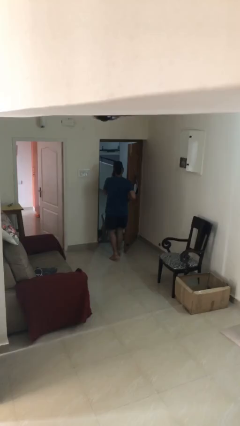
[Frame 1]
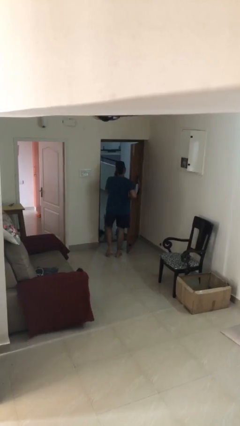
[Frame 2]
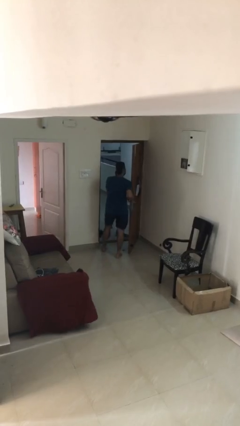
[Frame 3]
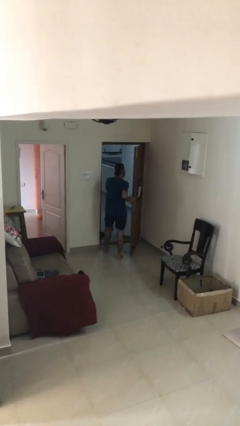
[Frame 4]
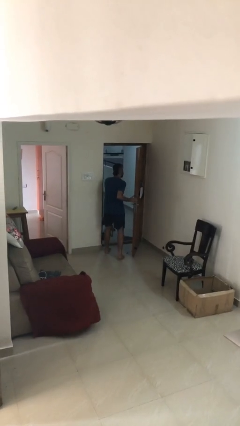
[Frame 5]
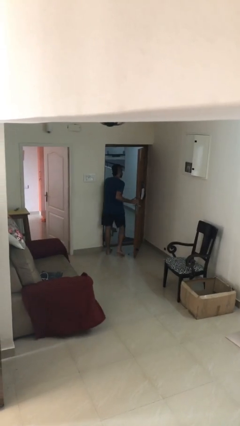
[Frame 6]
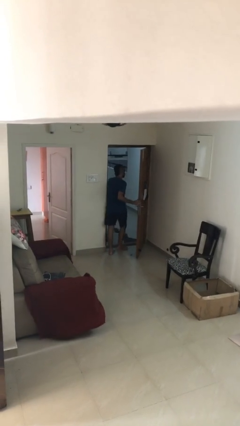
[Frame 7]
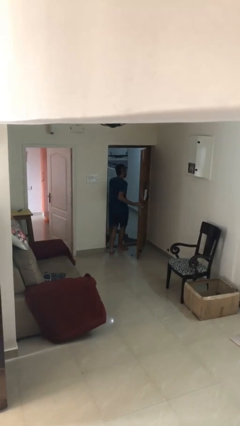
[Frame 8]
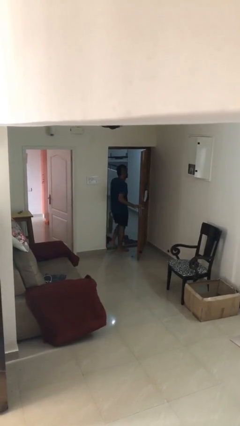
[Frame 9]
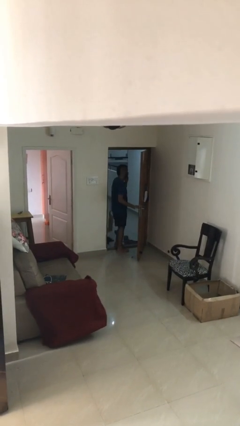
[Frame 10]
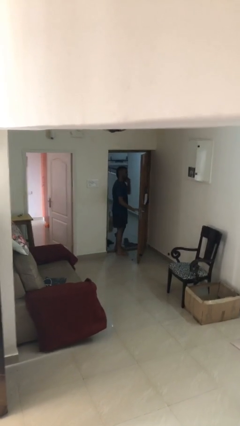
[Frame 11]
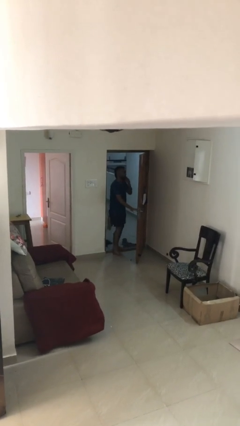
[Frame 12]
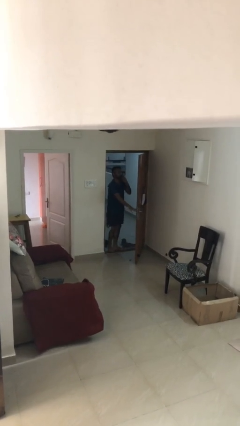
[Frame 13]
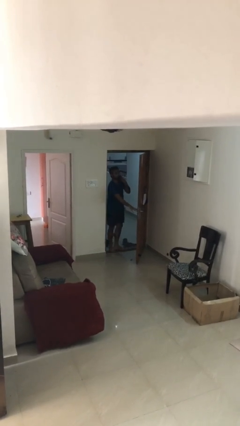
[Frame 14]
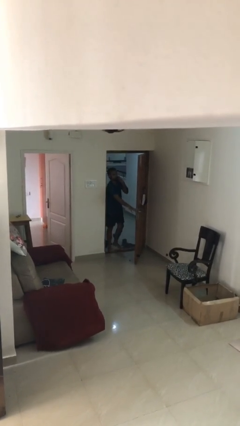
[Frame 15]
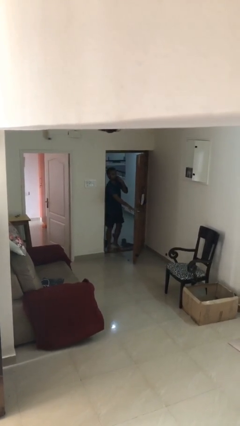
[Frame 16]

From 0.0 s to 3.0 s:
person exits scene through structure

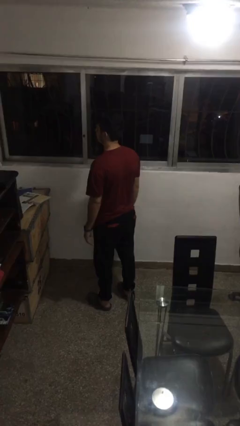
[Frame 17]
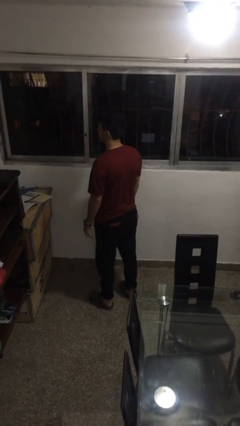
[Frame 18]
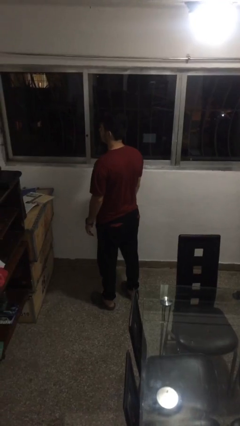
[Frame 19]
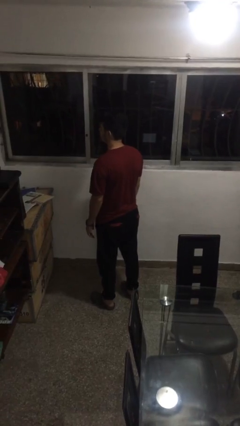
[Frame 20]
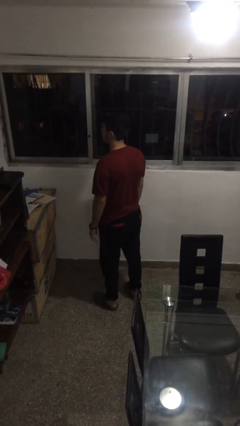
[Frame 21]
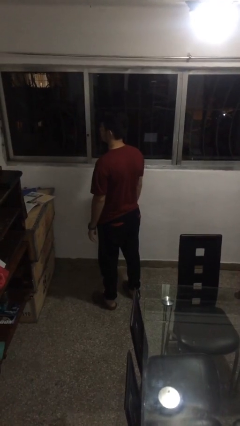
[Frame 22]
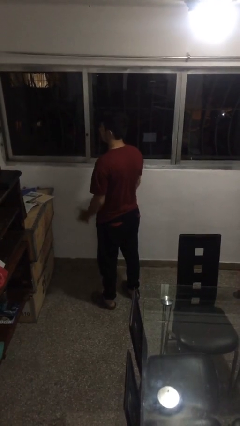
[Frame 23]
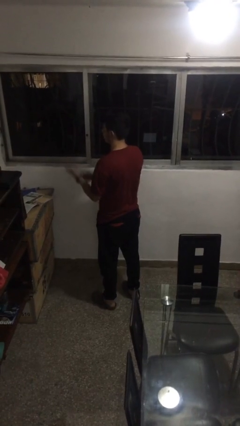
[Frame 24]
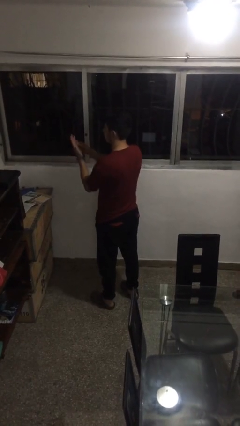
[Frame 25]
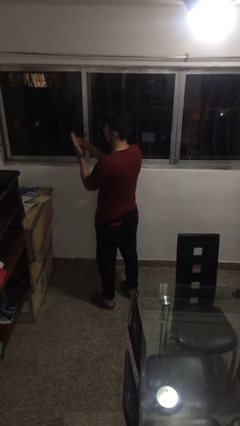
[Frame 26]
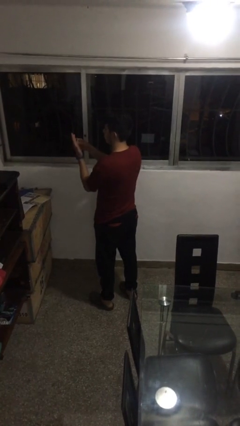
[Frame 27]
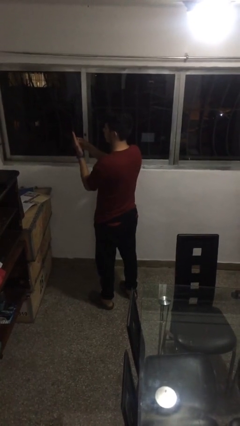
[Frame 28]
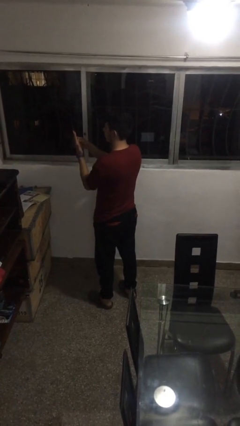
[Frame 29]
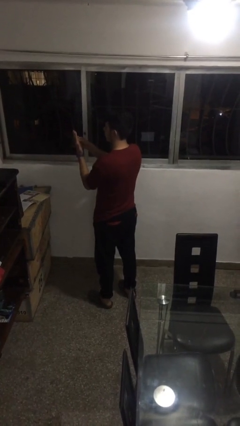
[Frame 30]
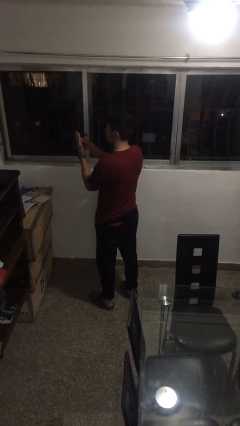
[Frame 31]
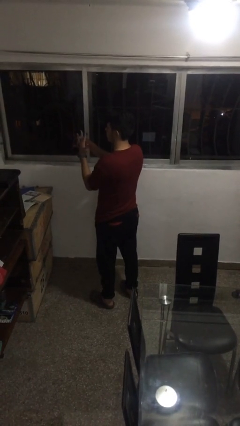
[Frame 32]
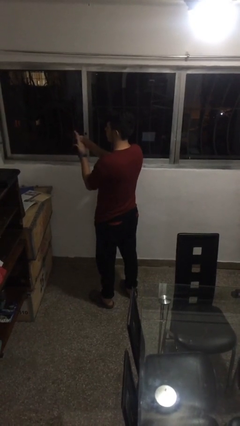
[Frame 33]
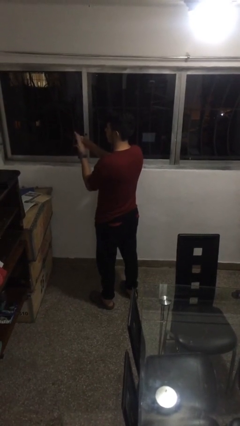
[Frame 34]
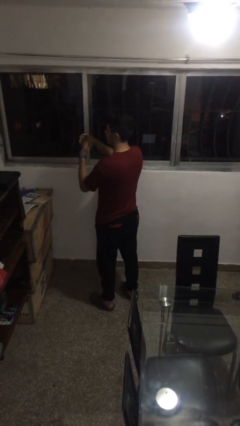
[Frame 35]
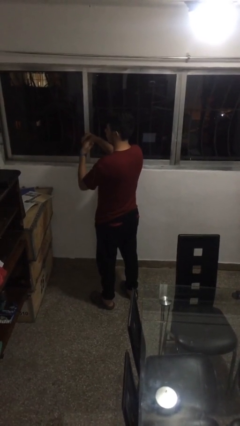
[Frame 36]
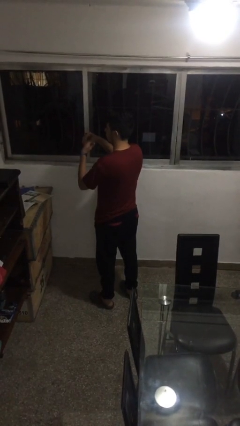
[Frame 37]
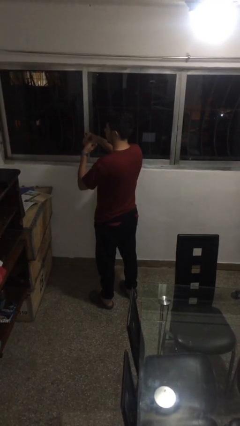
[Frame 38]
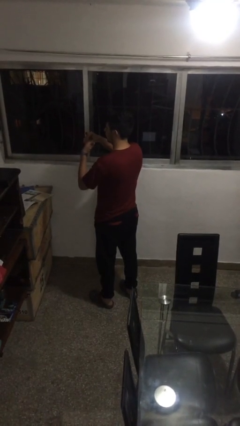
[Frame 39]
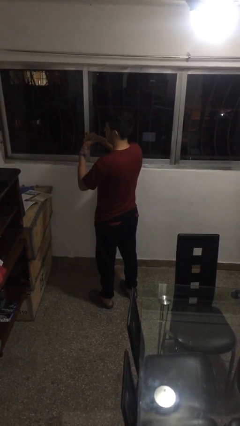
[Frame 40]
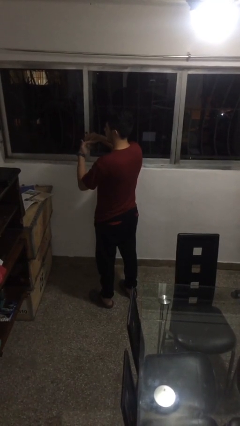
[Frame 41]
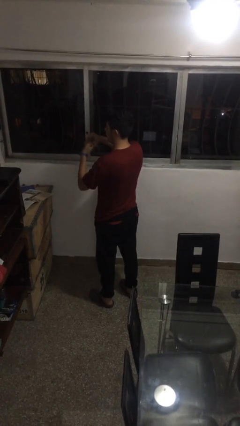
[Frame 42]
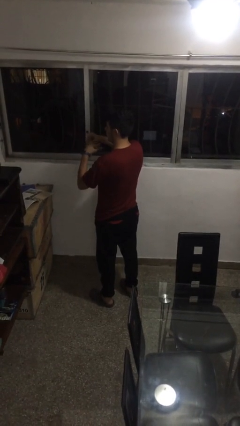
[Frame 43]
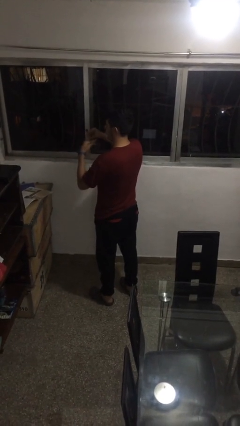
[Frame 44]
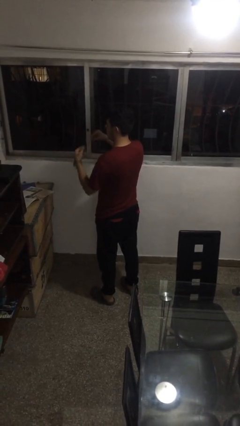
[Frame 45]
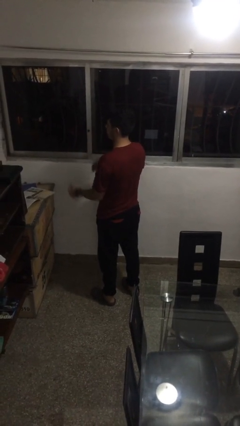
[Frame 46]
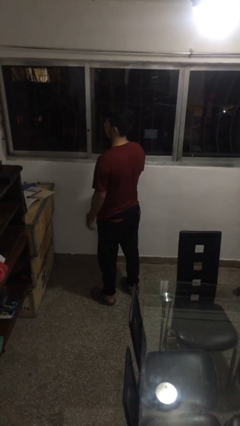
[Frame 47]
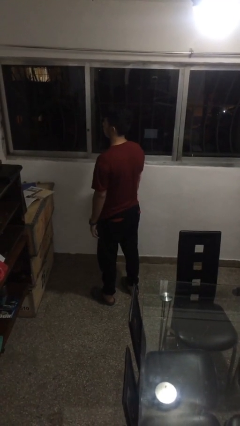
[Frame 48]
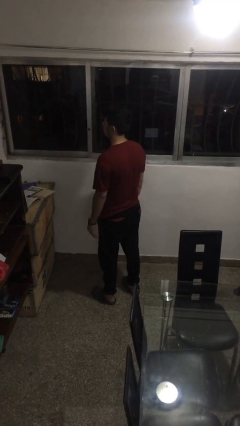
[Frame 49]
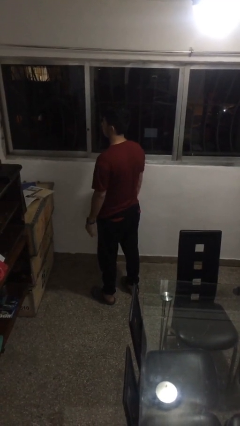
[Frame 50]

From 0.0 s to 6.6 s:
person takes off ring

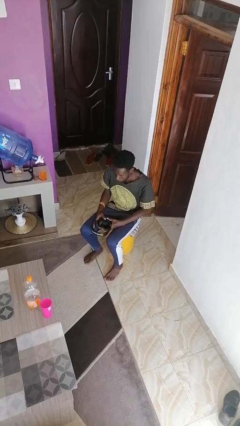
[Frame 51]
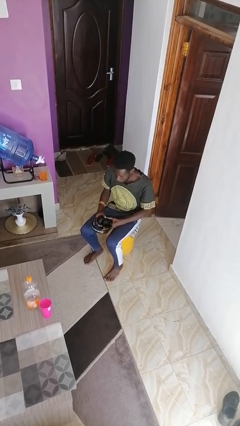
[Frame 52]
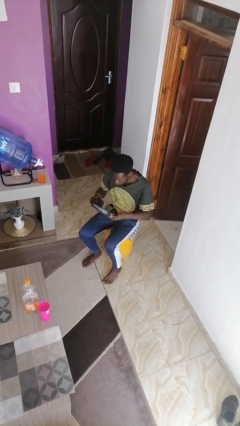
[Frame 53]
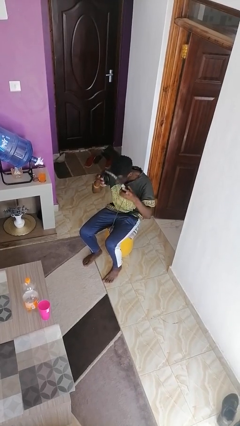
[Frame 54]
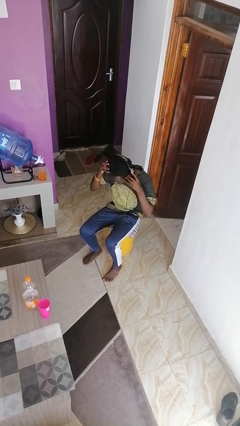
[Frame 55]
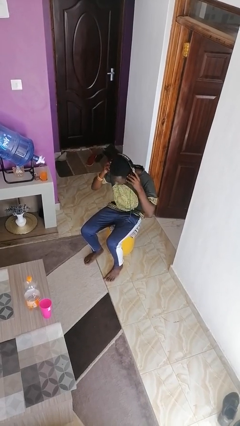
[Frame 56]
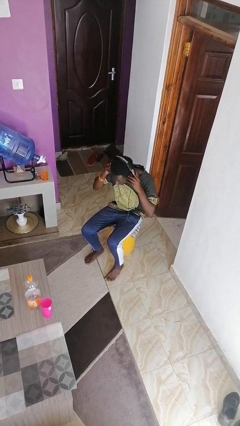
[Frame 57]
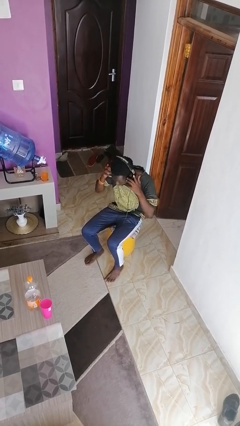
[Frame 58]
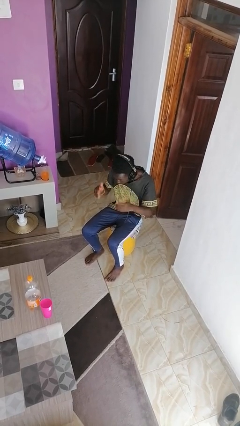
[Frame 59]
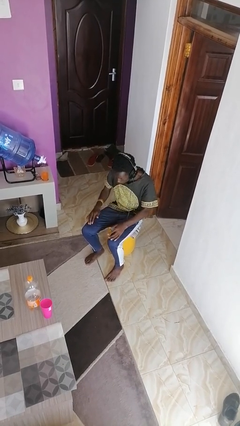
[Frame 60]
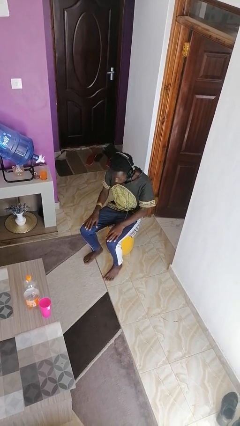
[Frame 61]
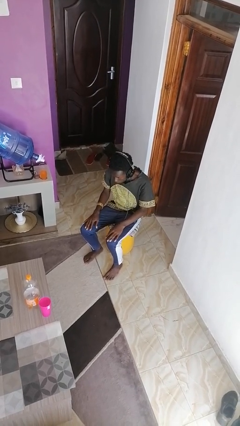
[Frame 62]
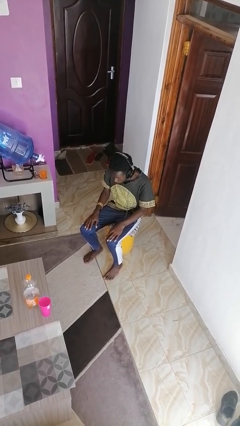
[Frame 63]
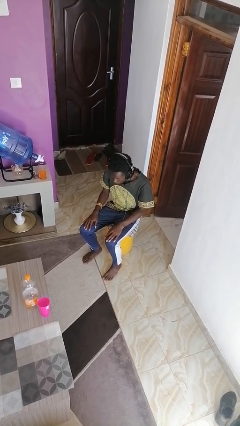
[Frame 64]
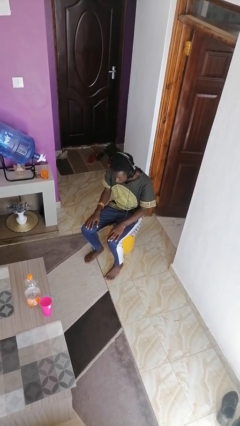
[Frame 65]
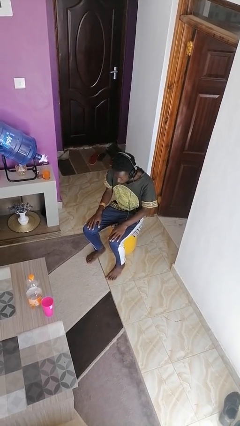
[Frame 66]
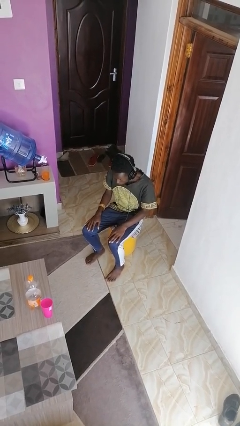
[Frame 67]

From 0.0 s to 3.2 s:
person puts on headphones

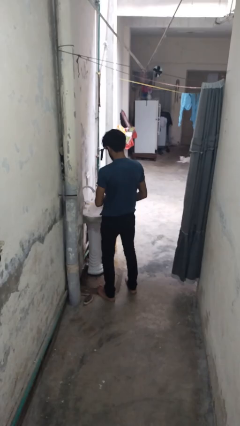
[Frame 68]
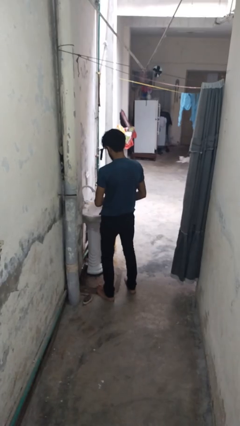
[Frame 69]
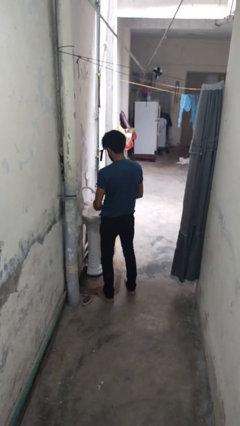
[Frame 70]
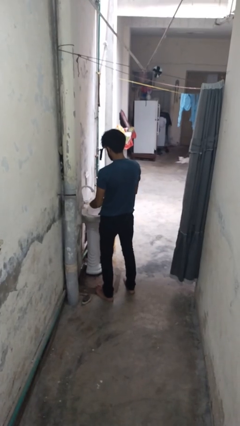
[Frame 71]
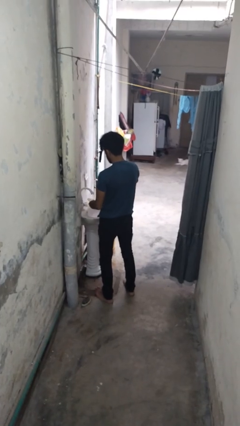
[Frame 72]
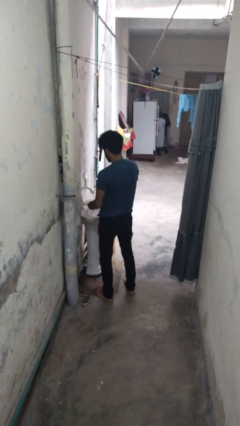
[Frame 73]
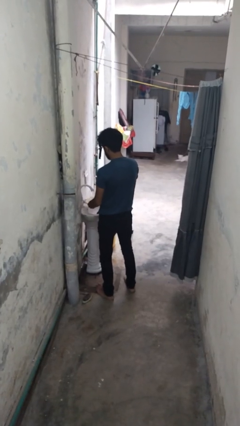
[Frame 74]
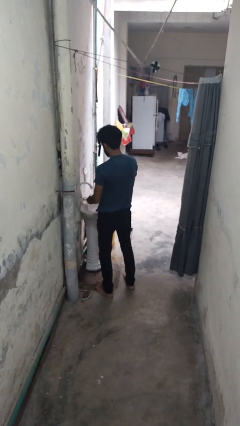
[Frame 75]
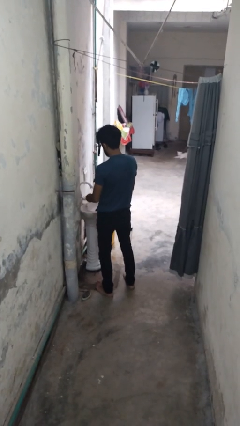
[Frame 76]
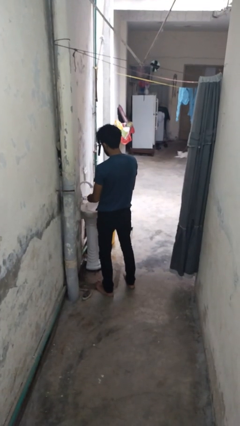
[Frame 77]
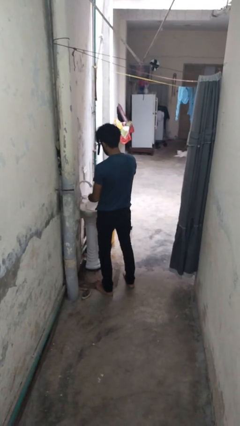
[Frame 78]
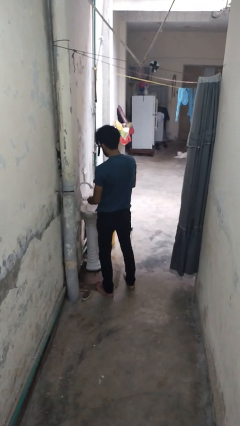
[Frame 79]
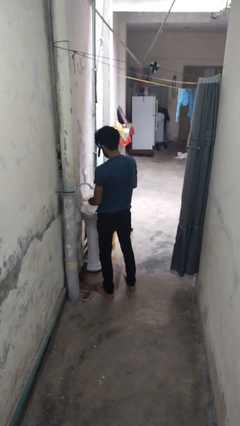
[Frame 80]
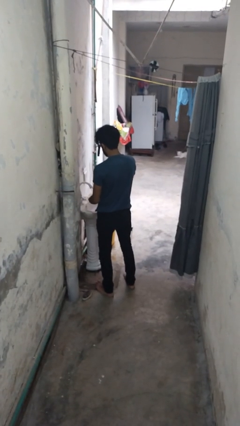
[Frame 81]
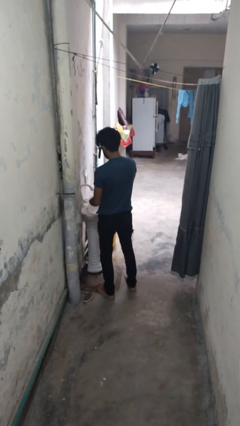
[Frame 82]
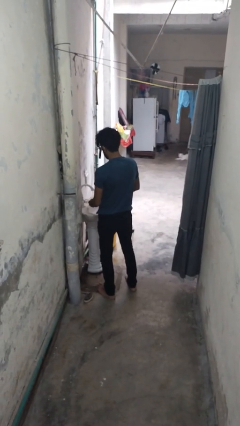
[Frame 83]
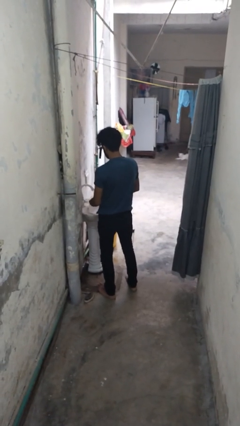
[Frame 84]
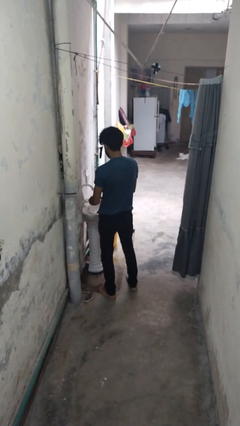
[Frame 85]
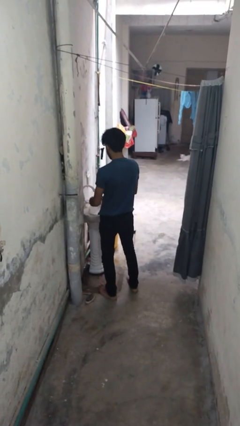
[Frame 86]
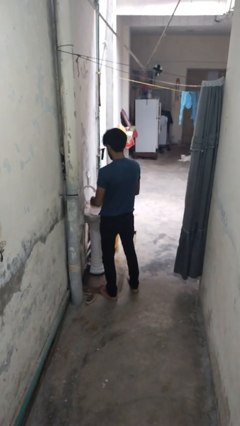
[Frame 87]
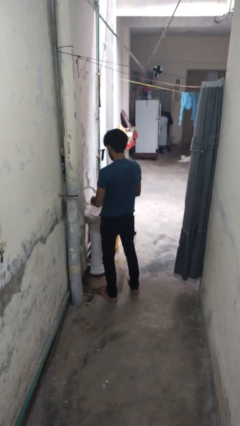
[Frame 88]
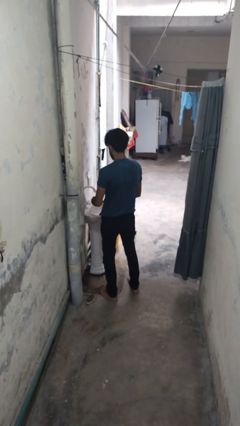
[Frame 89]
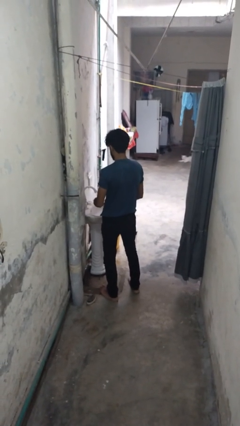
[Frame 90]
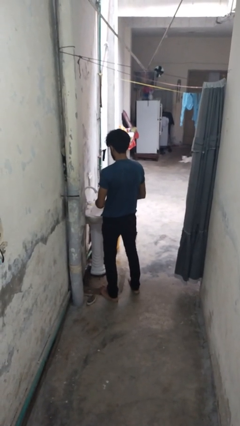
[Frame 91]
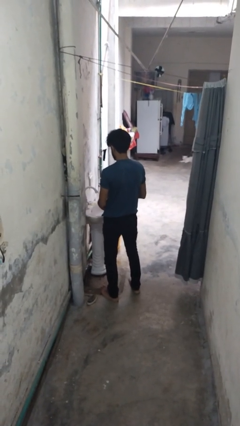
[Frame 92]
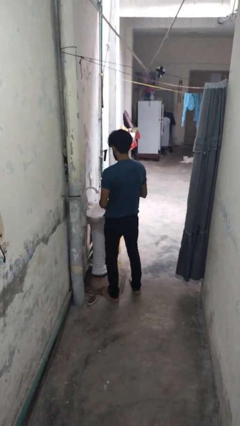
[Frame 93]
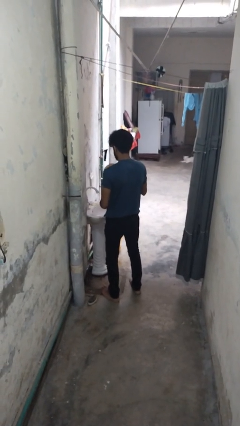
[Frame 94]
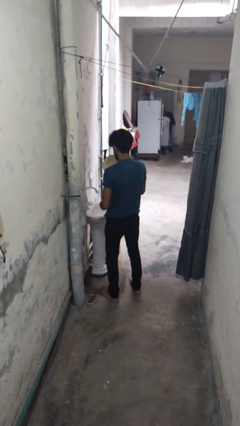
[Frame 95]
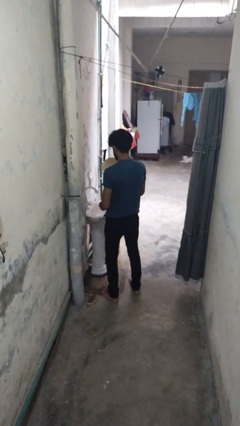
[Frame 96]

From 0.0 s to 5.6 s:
person washes dish
